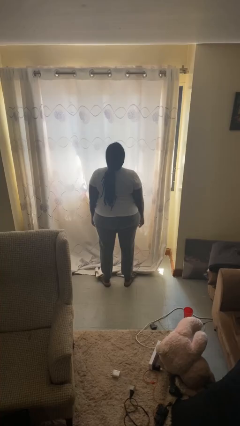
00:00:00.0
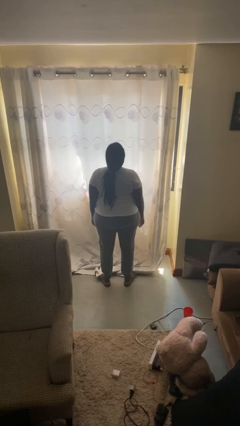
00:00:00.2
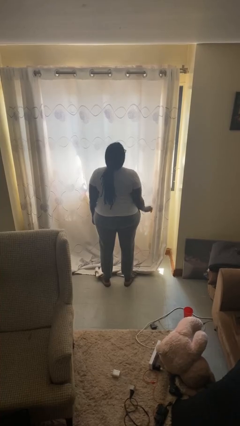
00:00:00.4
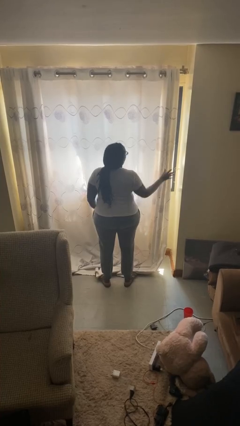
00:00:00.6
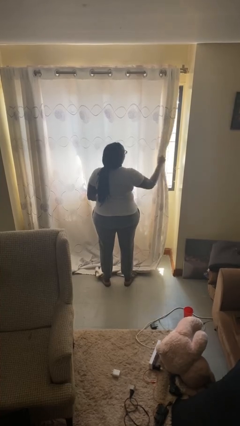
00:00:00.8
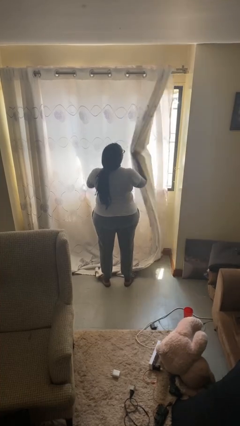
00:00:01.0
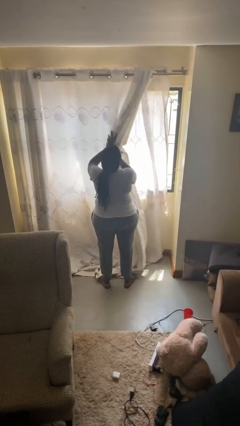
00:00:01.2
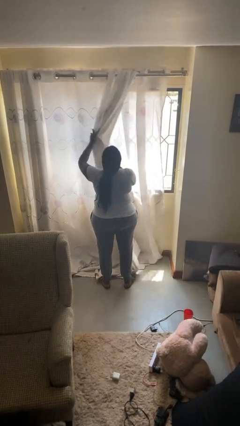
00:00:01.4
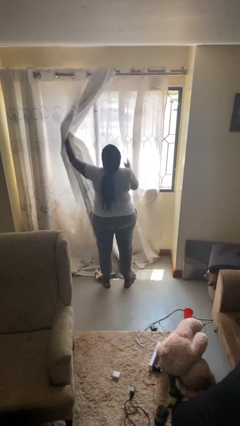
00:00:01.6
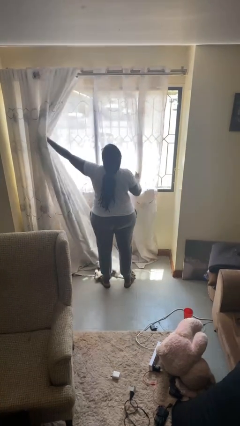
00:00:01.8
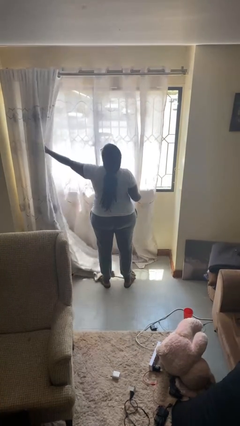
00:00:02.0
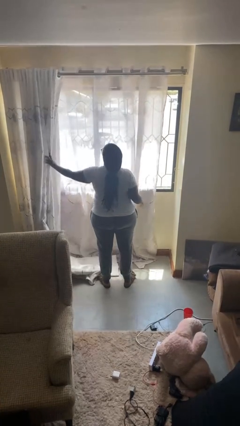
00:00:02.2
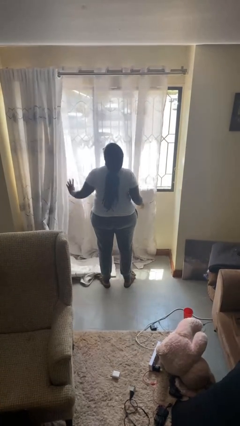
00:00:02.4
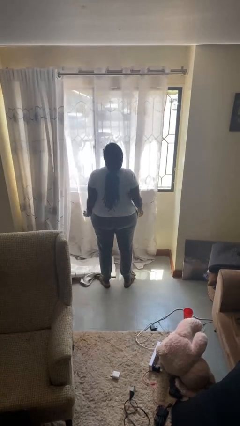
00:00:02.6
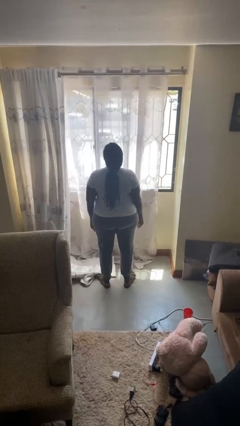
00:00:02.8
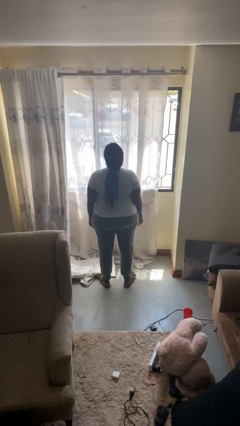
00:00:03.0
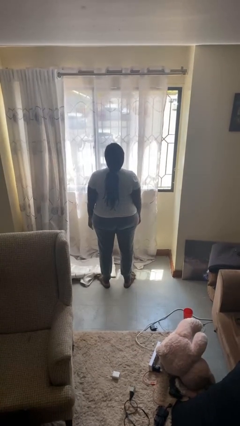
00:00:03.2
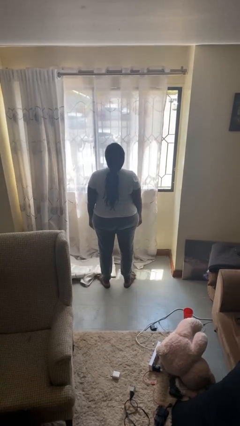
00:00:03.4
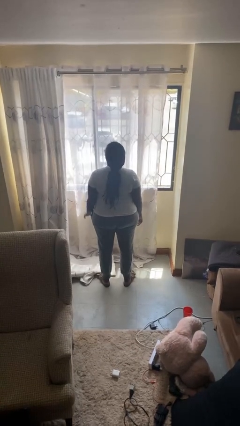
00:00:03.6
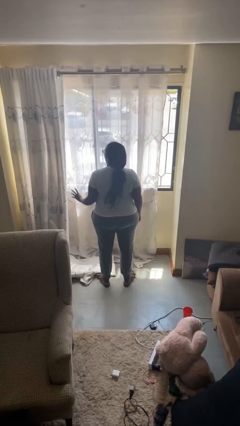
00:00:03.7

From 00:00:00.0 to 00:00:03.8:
person opens curtains

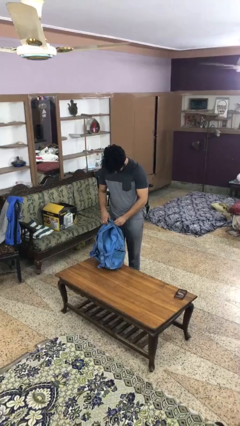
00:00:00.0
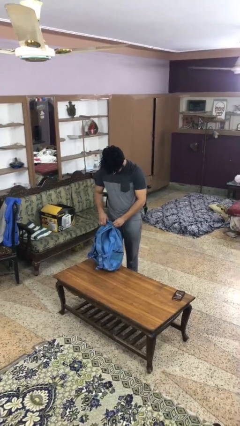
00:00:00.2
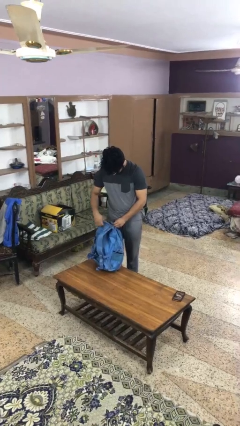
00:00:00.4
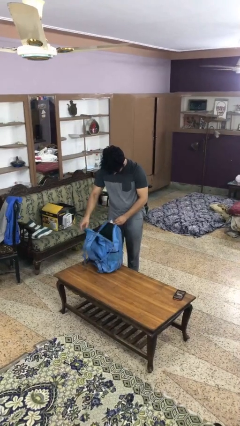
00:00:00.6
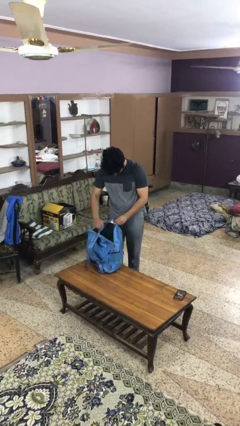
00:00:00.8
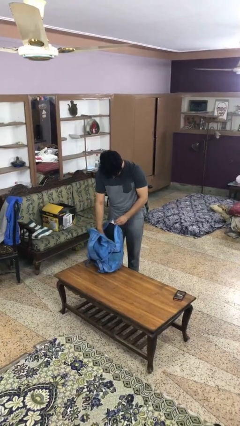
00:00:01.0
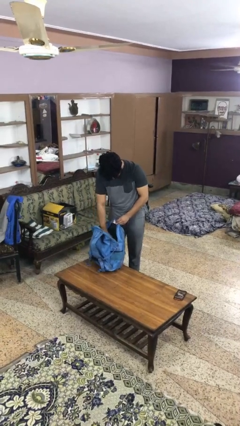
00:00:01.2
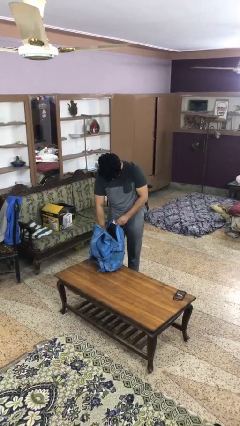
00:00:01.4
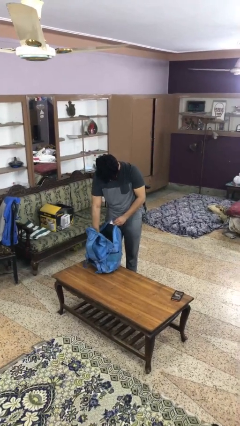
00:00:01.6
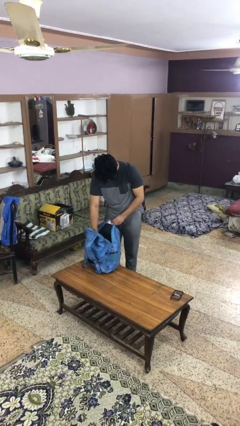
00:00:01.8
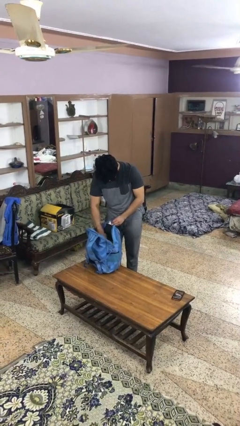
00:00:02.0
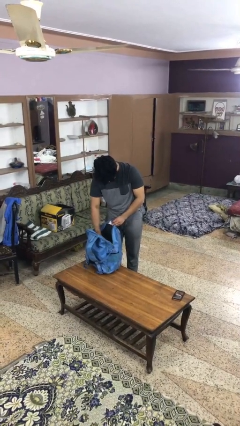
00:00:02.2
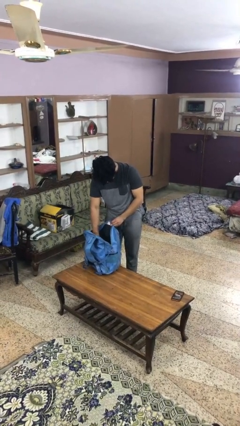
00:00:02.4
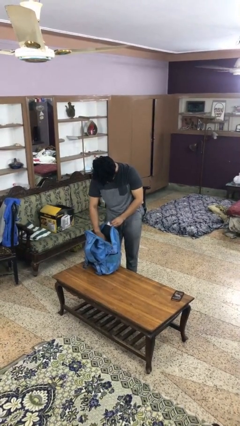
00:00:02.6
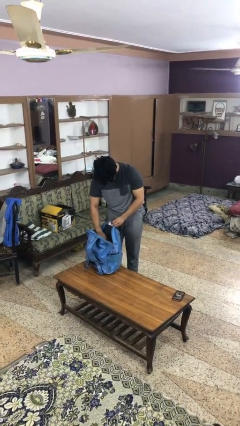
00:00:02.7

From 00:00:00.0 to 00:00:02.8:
person searches in bag

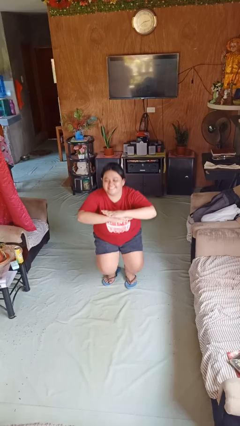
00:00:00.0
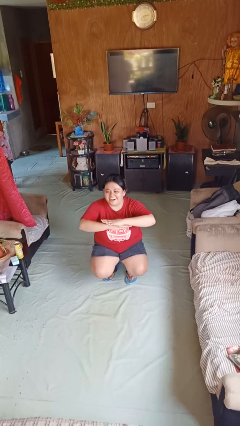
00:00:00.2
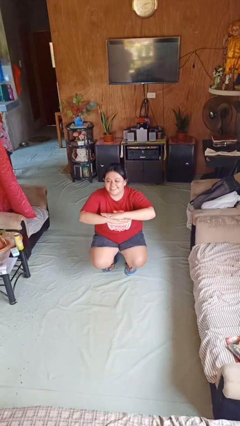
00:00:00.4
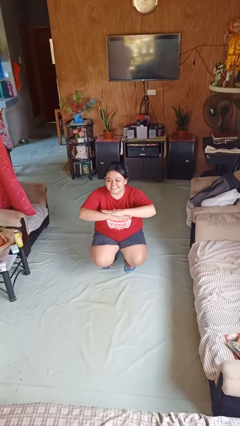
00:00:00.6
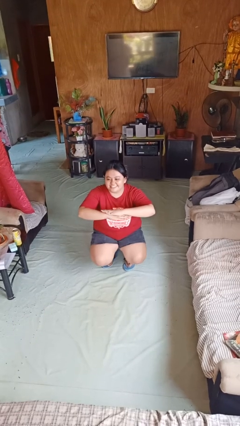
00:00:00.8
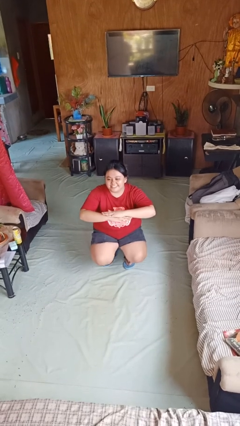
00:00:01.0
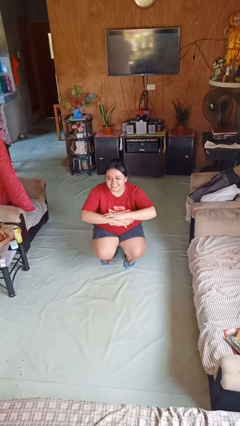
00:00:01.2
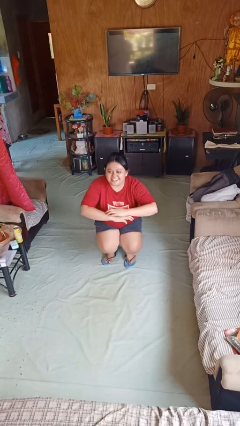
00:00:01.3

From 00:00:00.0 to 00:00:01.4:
person squats

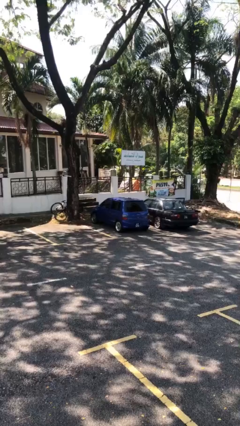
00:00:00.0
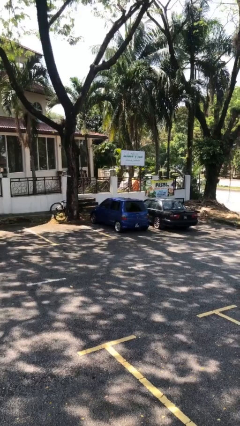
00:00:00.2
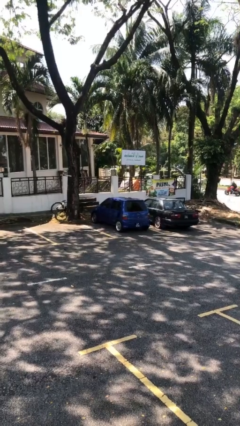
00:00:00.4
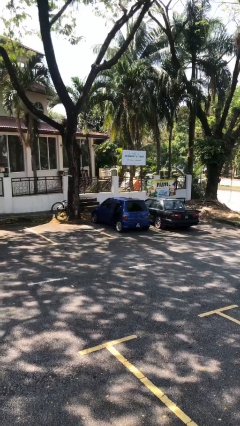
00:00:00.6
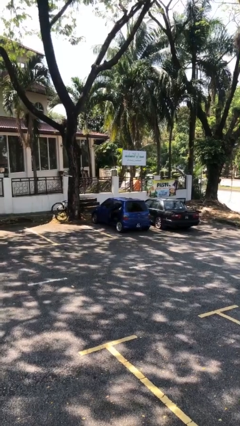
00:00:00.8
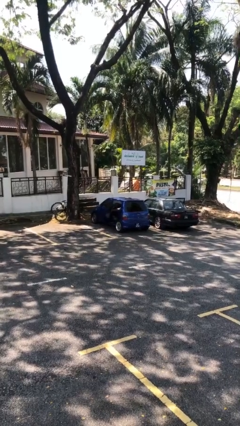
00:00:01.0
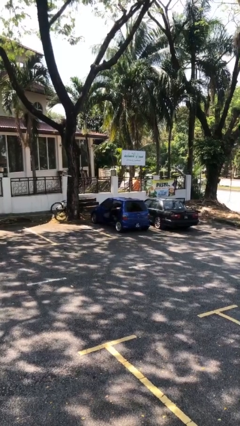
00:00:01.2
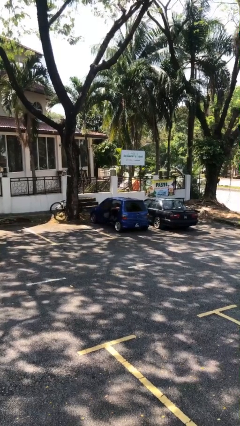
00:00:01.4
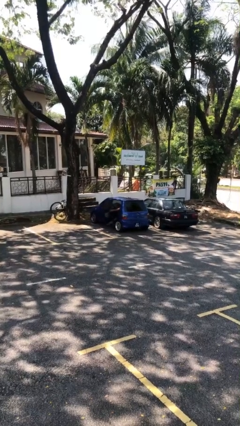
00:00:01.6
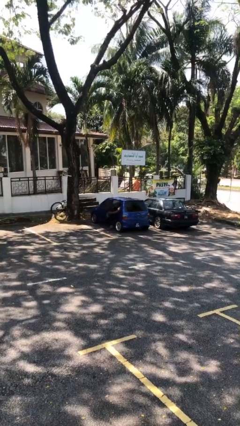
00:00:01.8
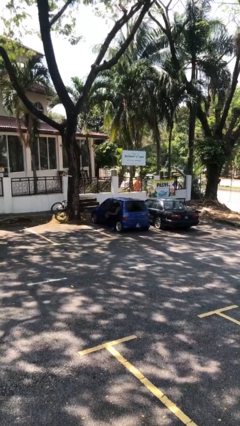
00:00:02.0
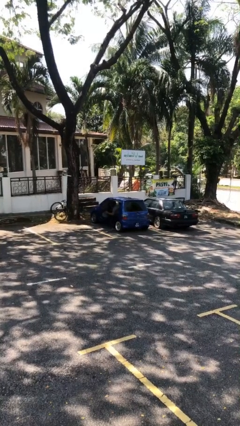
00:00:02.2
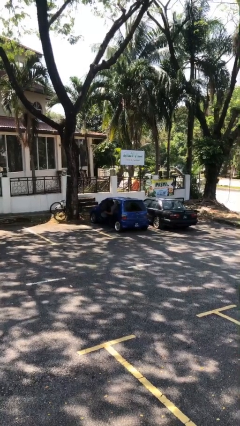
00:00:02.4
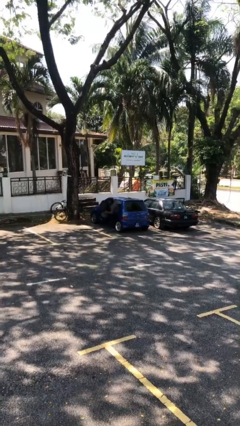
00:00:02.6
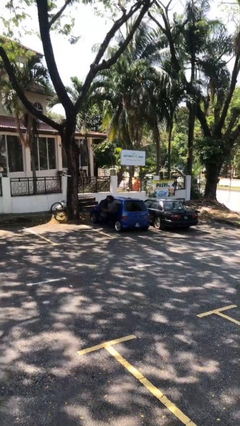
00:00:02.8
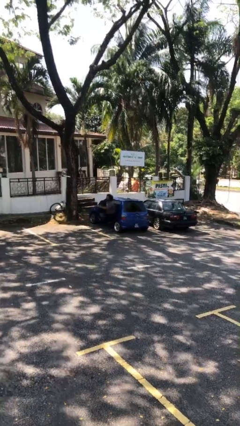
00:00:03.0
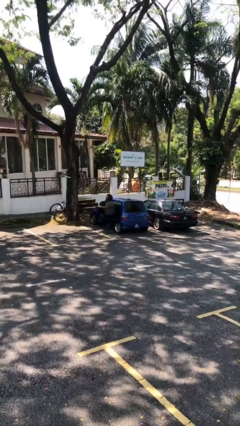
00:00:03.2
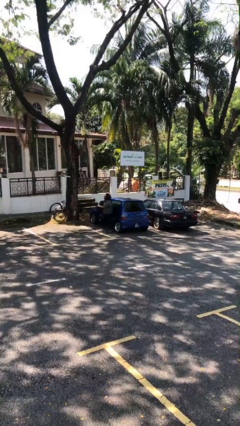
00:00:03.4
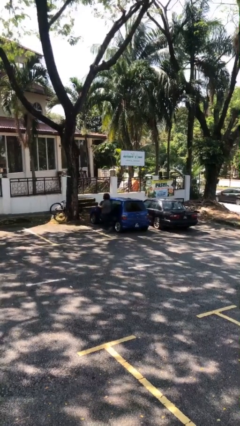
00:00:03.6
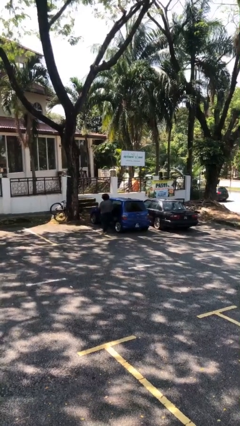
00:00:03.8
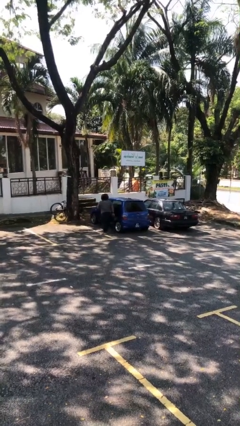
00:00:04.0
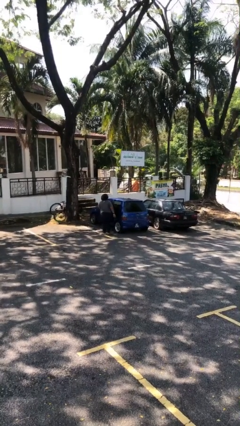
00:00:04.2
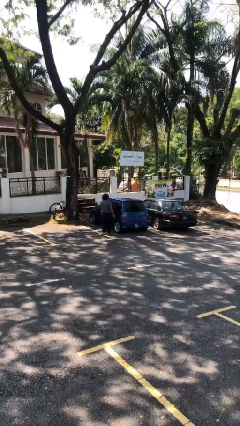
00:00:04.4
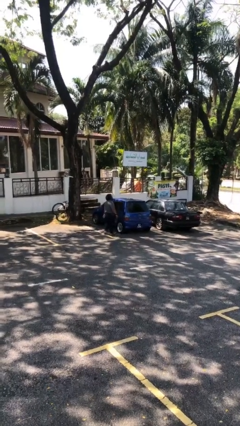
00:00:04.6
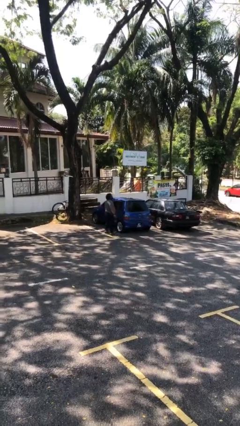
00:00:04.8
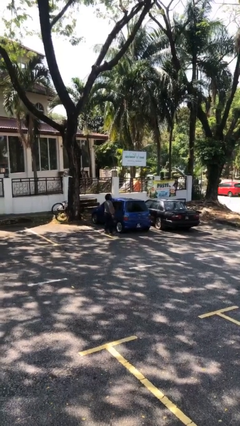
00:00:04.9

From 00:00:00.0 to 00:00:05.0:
car drops off person

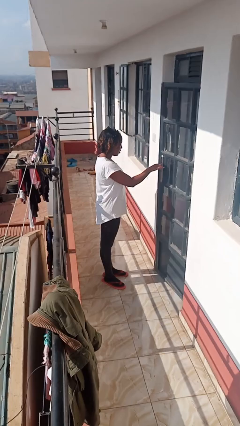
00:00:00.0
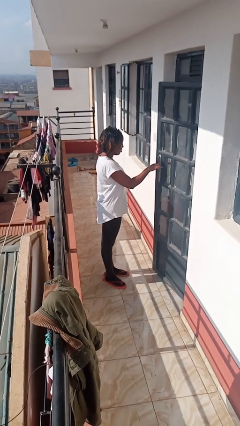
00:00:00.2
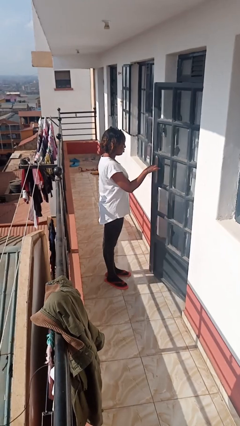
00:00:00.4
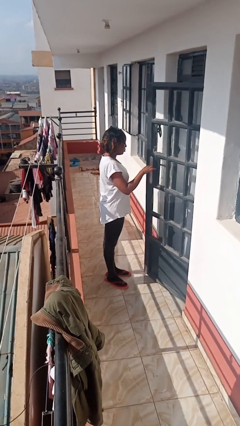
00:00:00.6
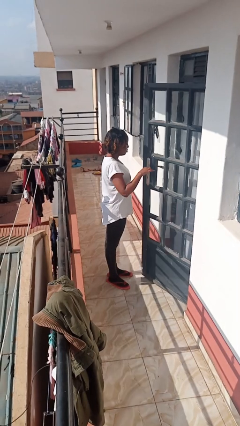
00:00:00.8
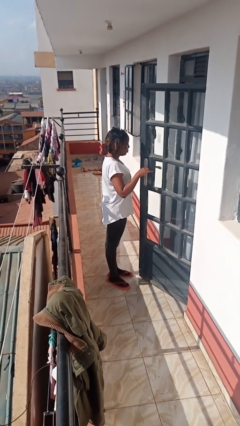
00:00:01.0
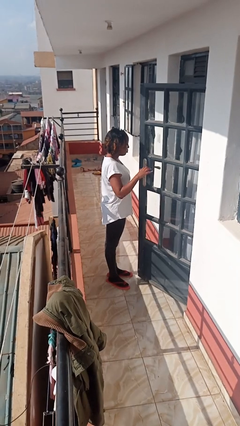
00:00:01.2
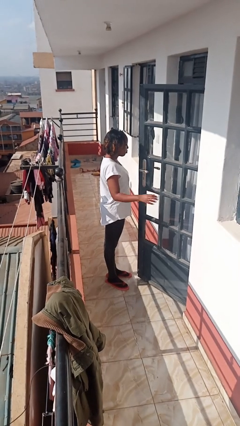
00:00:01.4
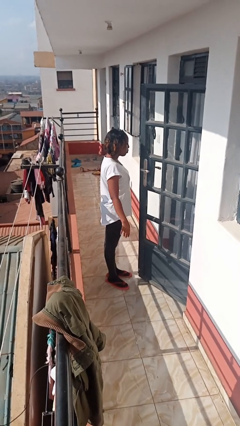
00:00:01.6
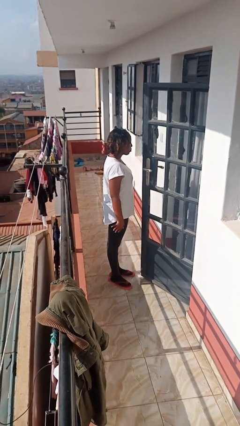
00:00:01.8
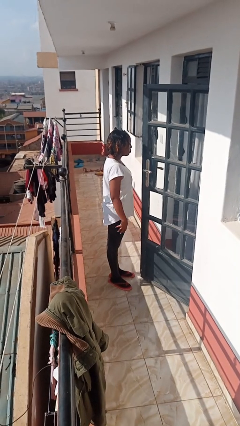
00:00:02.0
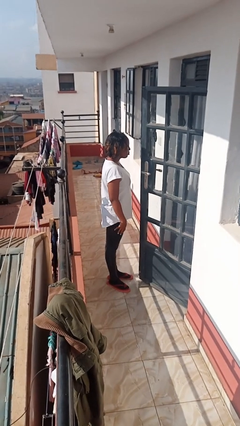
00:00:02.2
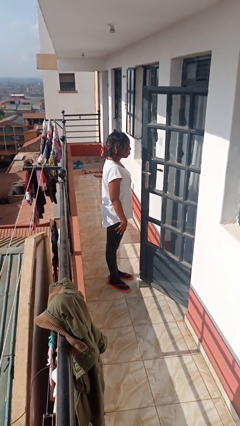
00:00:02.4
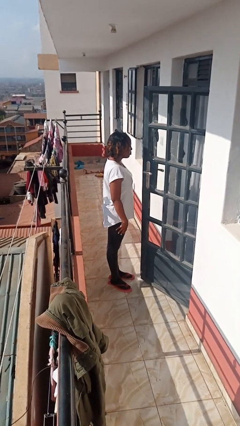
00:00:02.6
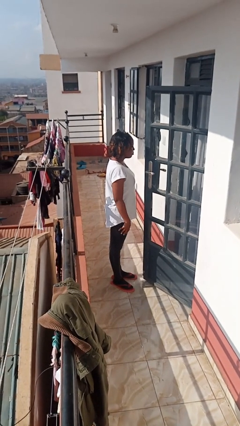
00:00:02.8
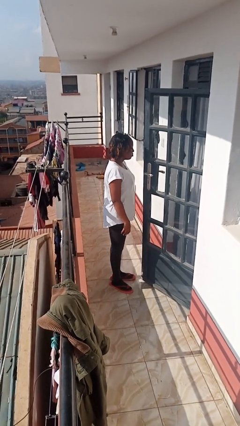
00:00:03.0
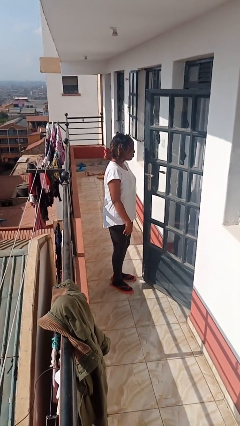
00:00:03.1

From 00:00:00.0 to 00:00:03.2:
person opens facility door

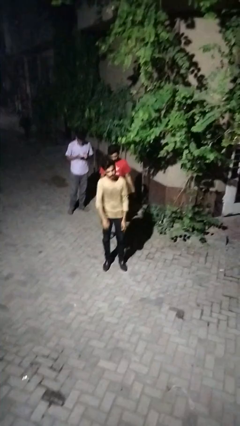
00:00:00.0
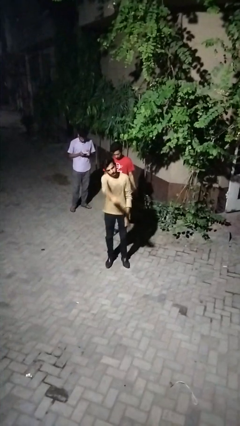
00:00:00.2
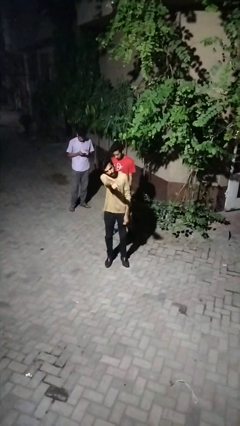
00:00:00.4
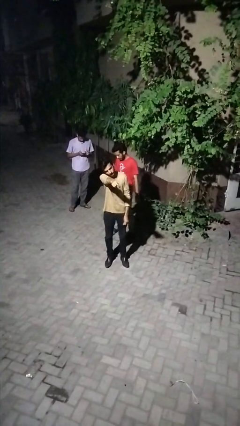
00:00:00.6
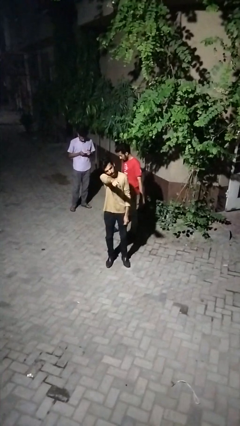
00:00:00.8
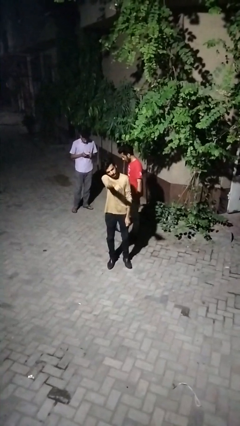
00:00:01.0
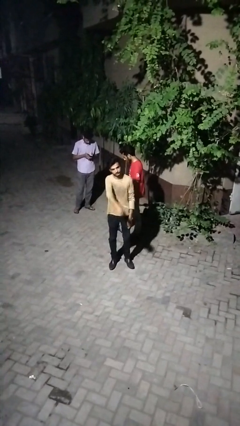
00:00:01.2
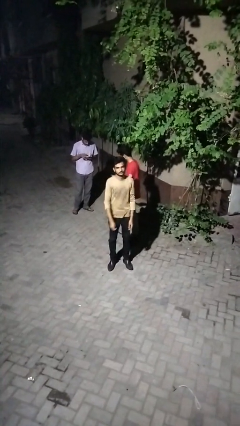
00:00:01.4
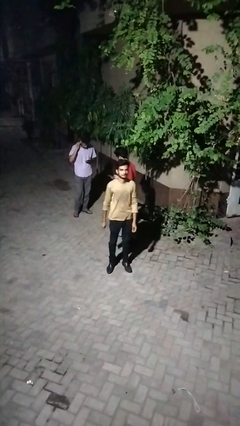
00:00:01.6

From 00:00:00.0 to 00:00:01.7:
person points at person
